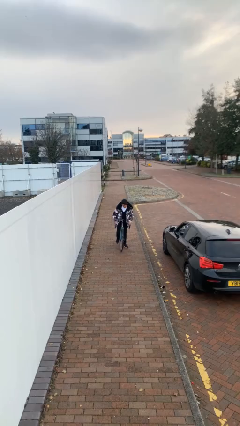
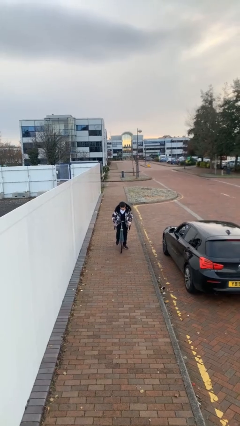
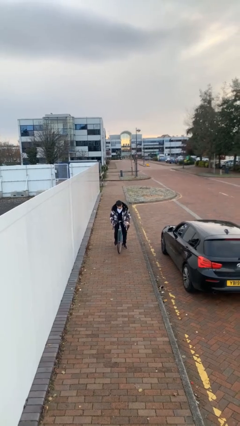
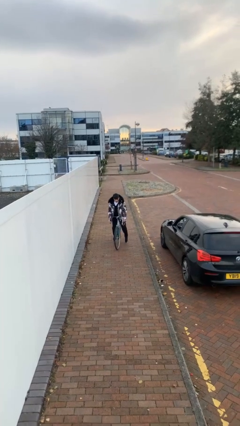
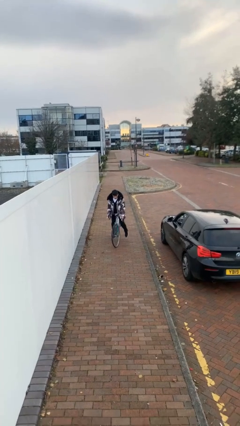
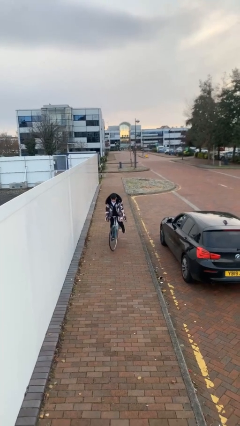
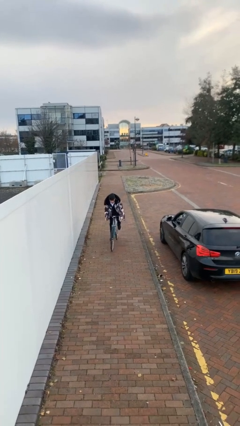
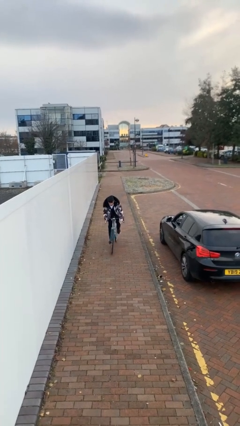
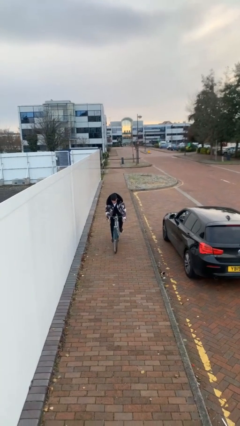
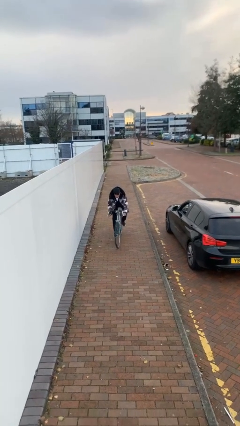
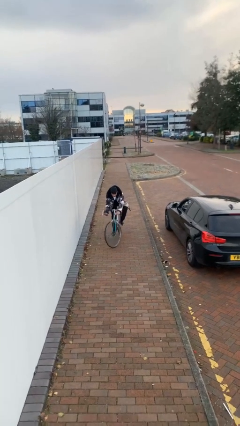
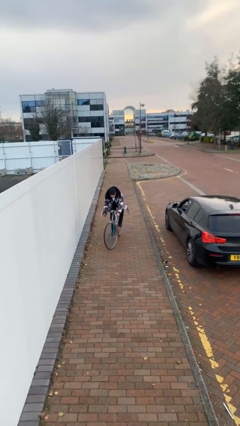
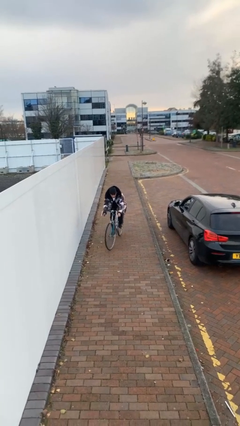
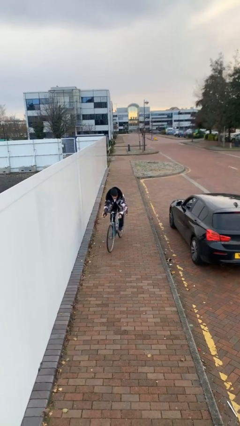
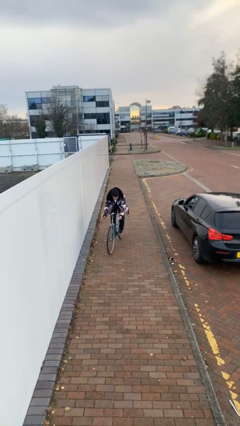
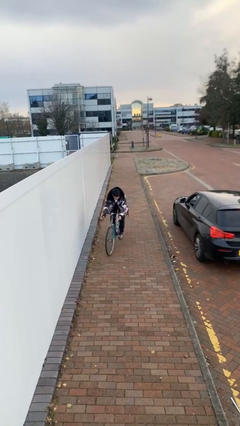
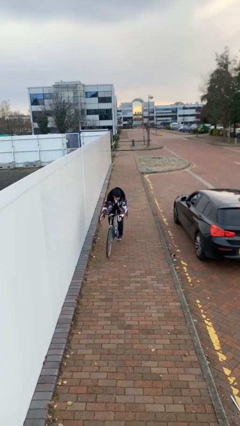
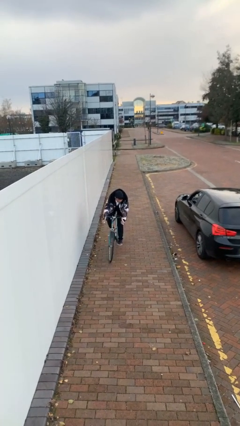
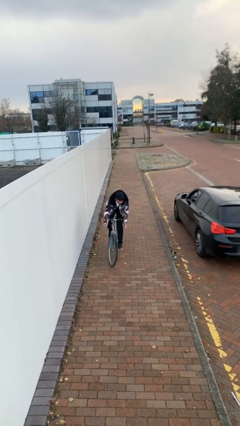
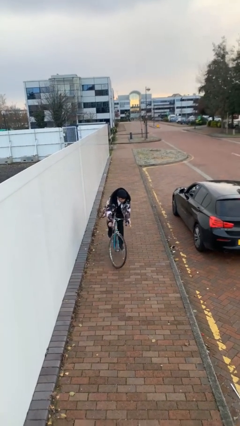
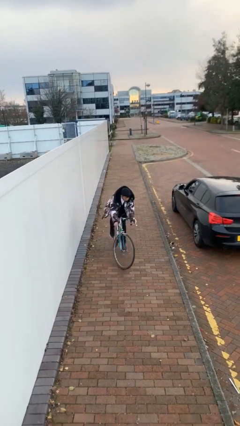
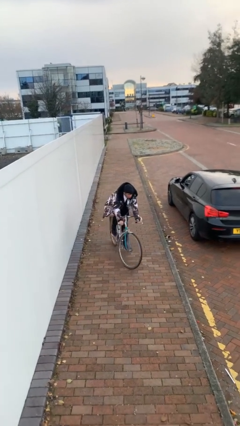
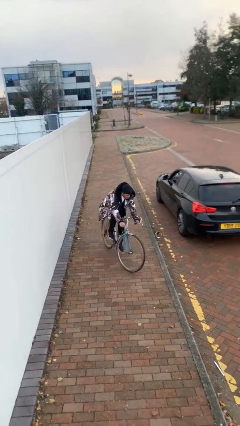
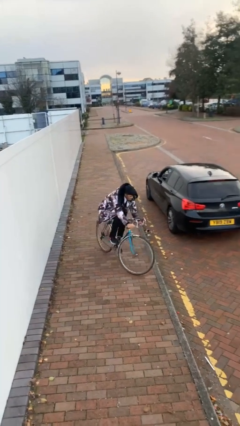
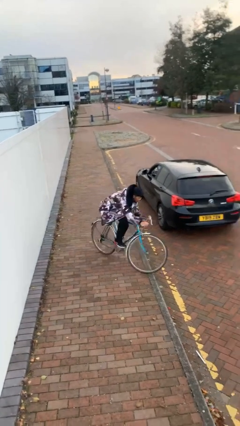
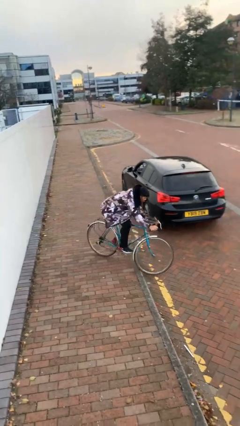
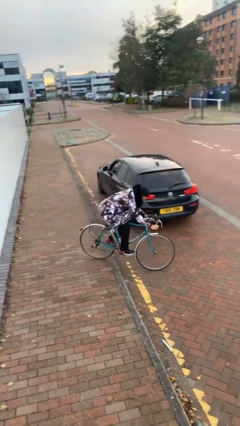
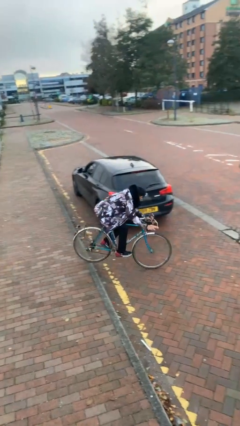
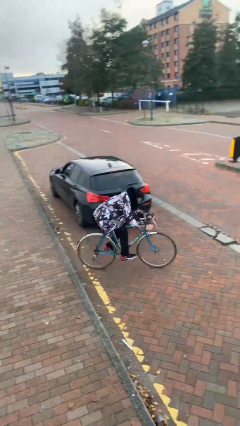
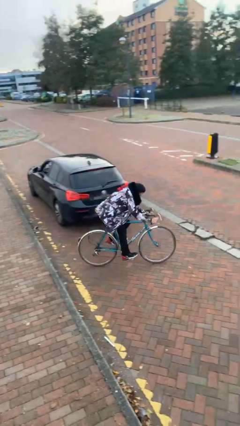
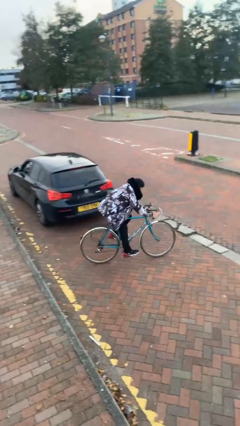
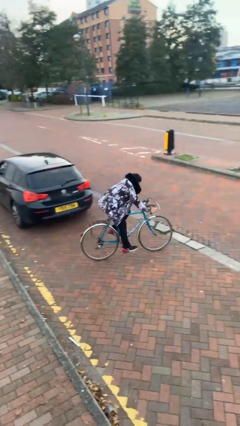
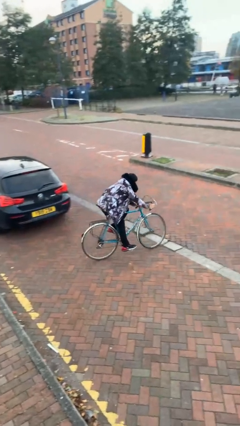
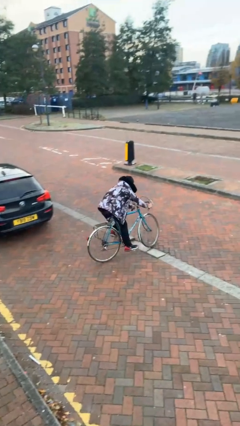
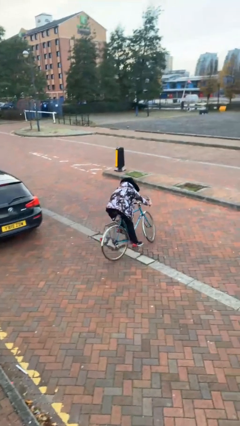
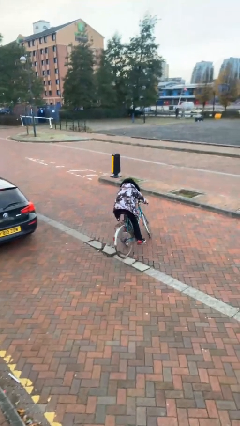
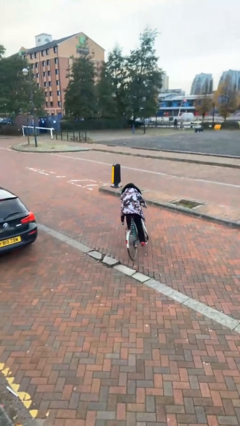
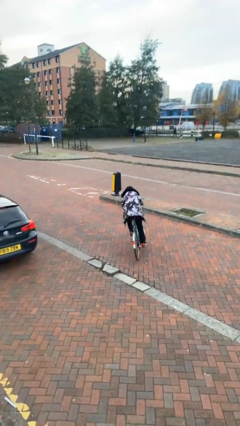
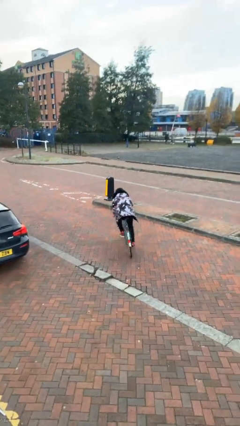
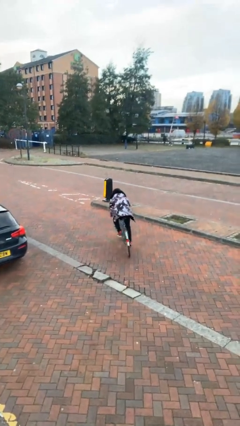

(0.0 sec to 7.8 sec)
person rides bicycle

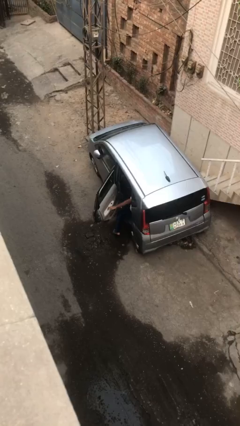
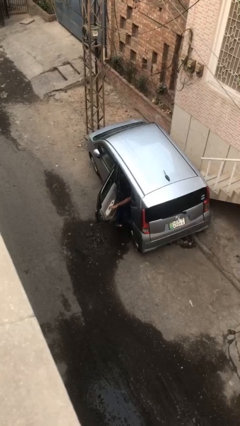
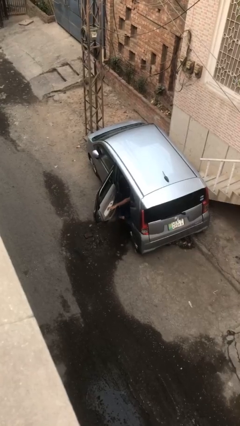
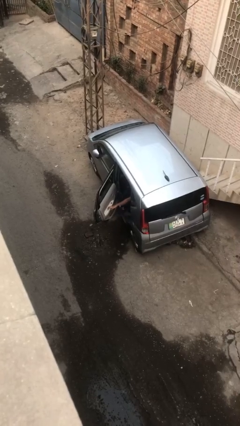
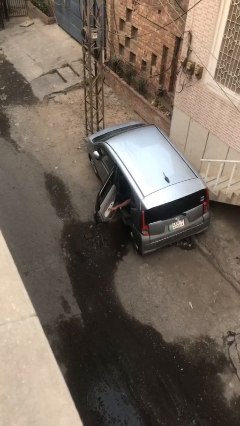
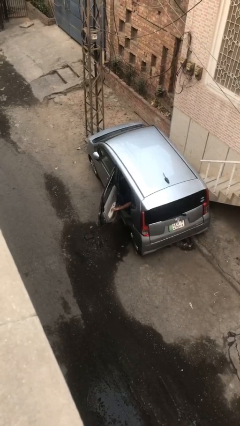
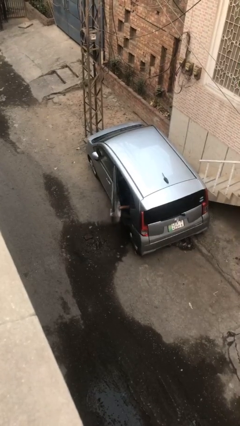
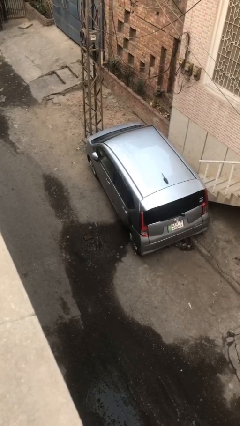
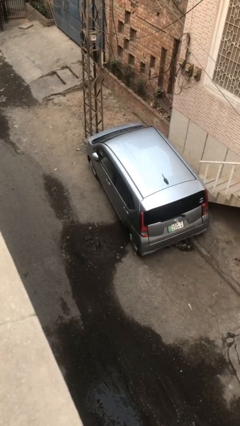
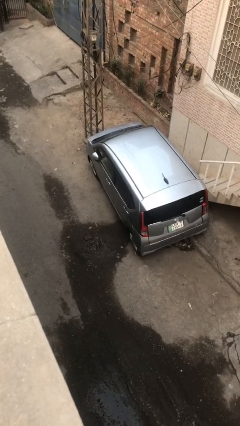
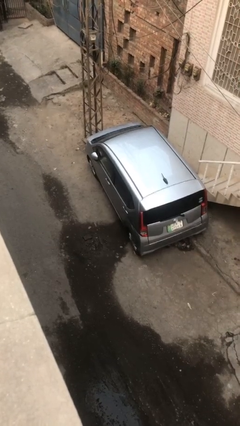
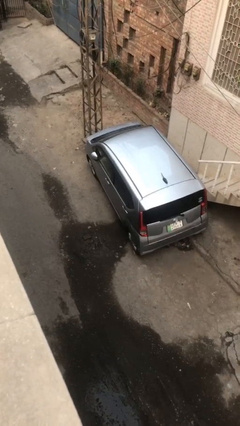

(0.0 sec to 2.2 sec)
person closes car door

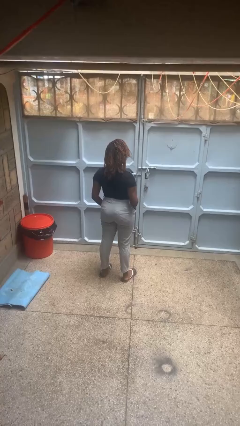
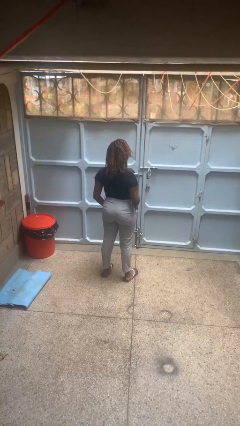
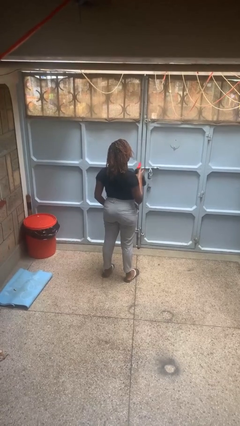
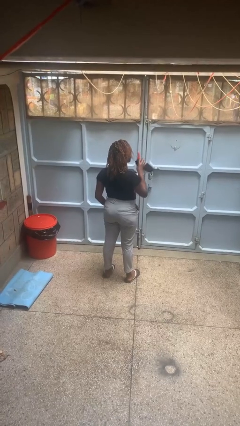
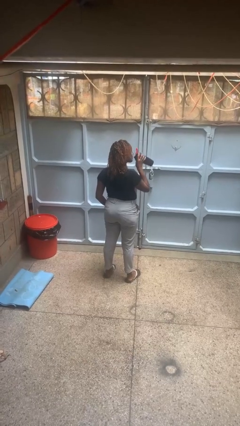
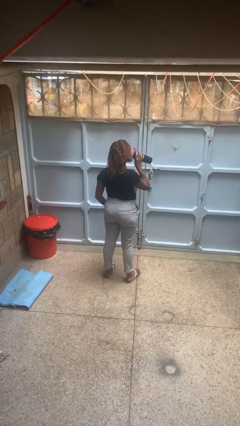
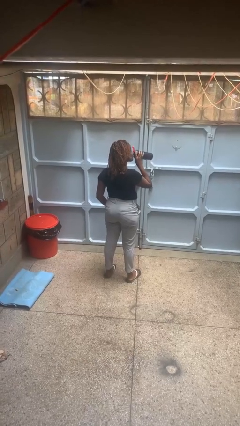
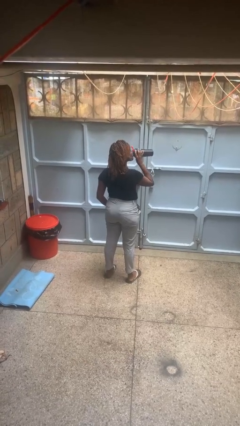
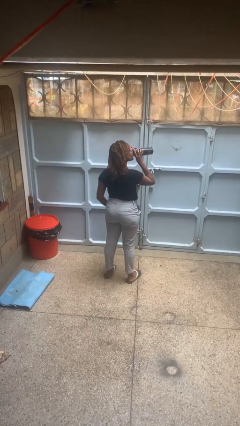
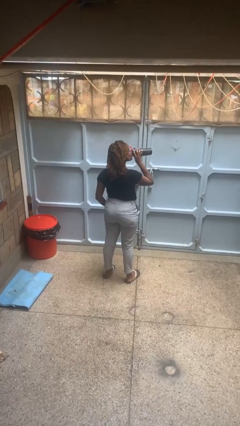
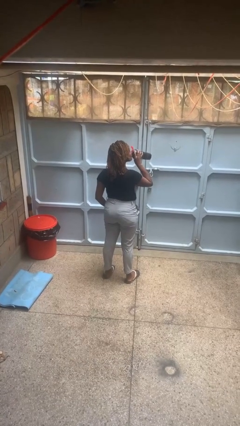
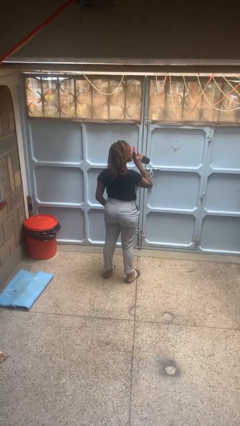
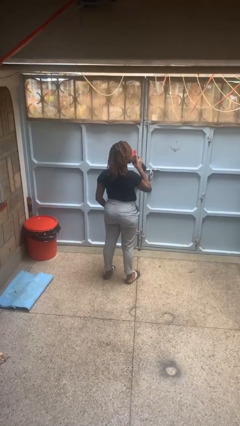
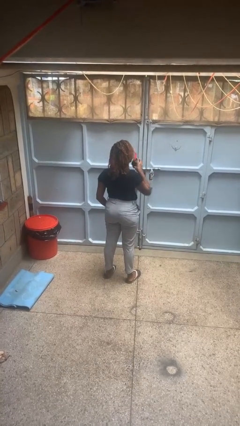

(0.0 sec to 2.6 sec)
person drinks from bottle

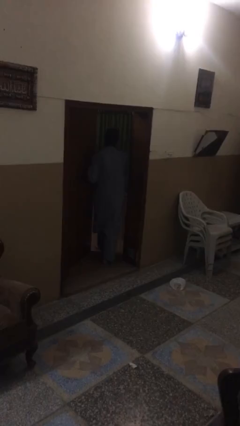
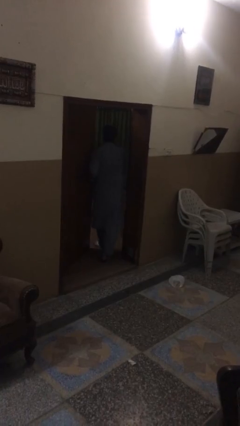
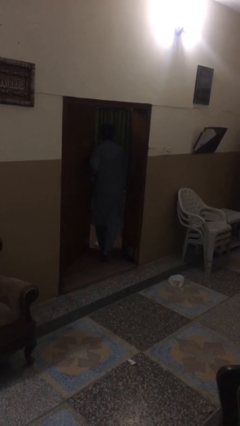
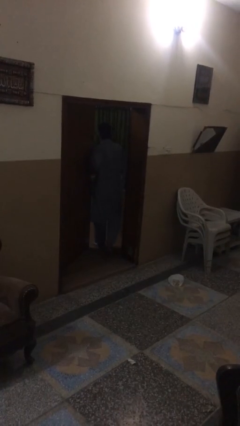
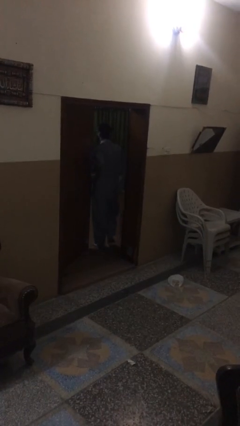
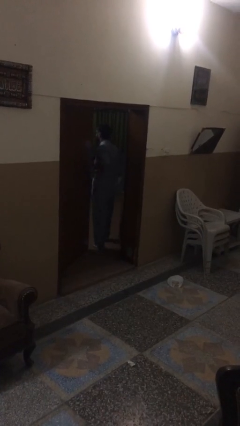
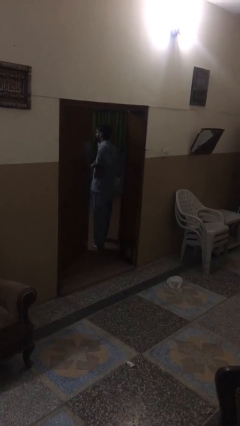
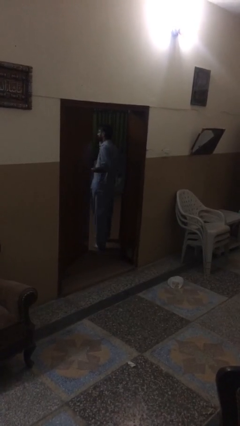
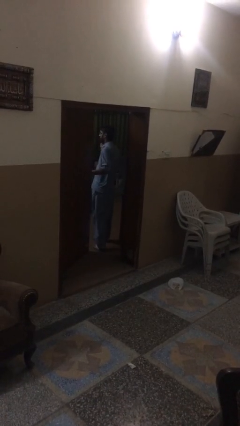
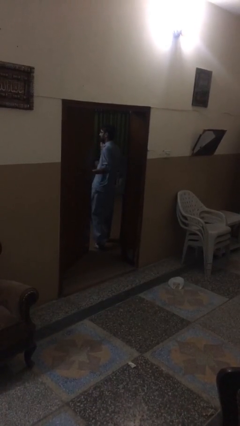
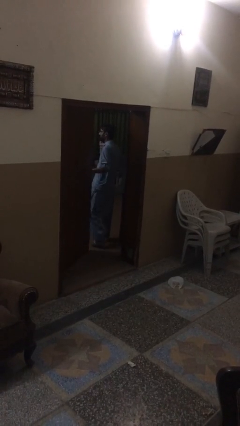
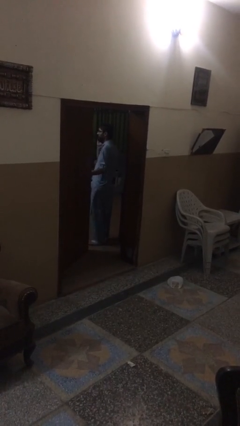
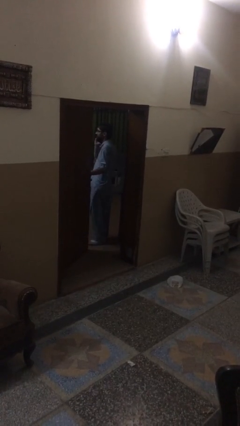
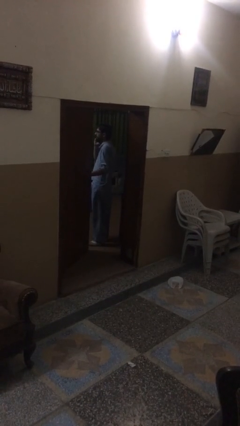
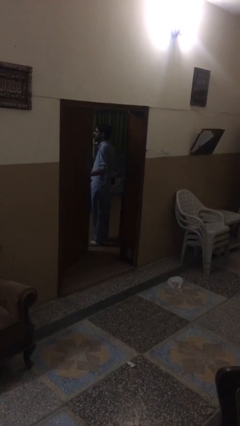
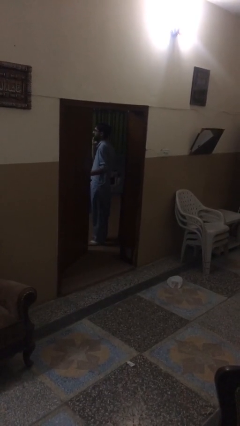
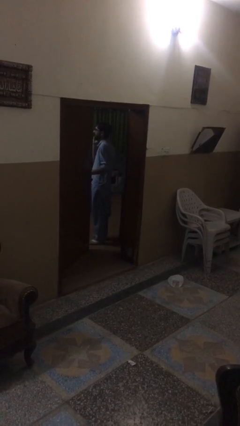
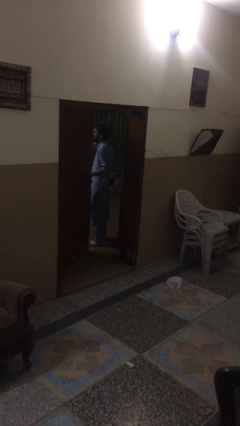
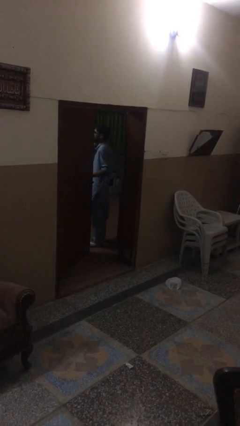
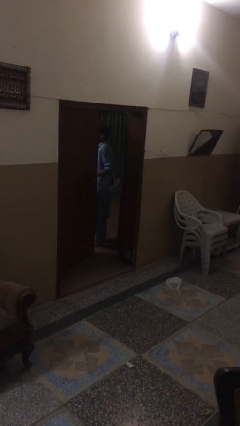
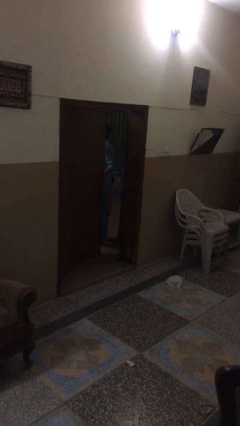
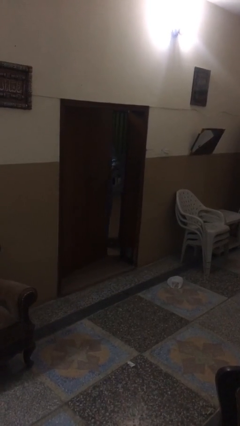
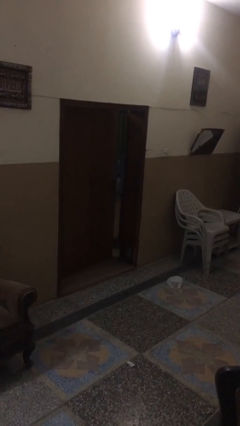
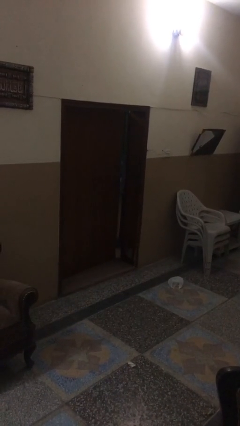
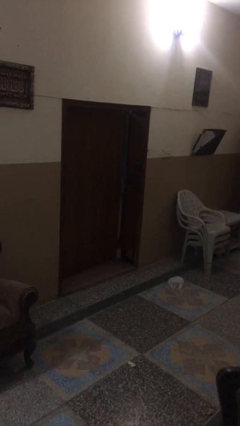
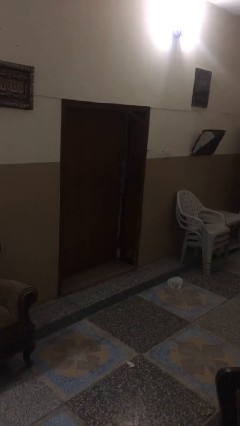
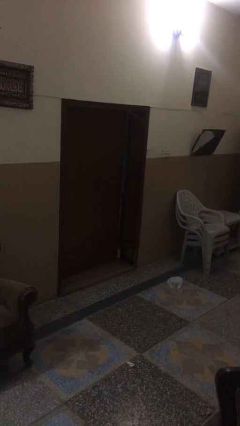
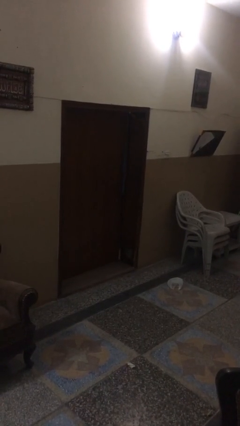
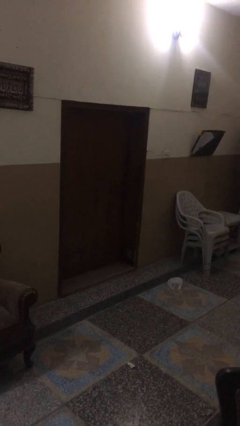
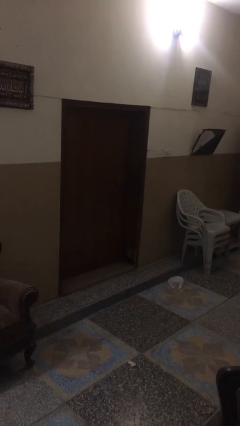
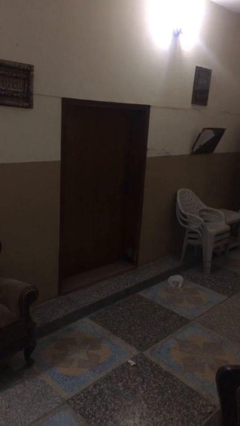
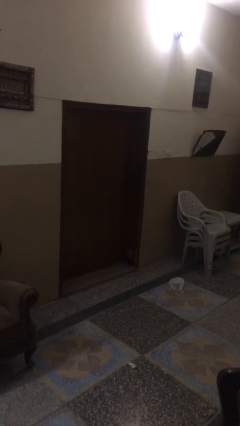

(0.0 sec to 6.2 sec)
person exits scene through structure
